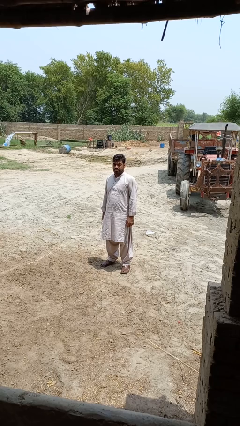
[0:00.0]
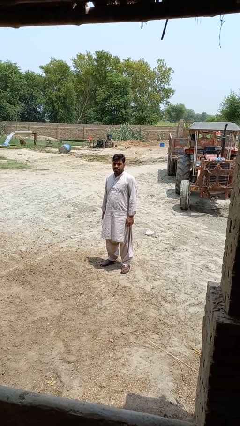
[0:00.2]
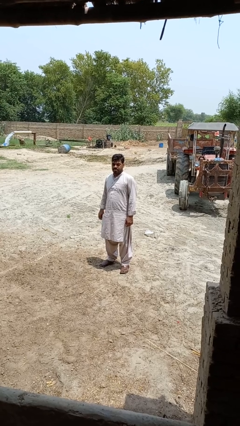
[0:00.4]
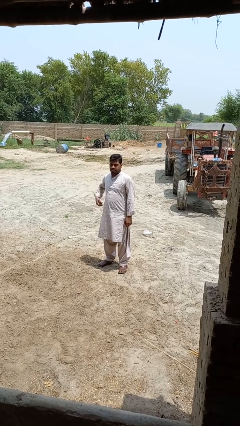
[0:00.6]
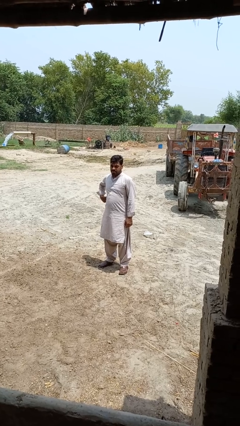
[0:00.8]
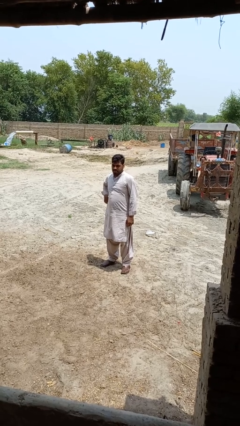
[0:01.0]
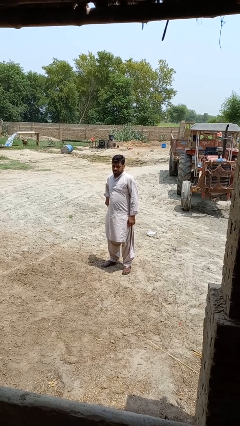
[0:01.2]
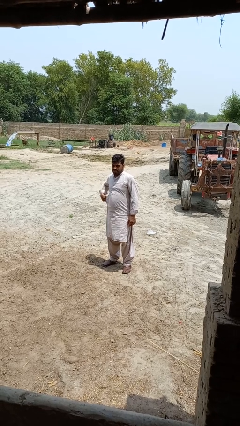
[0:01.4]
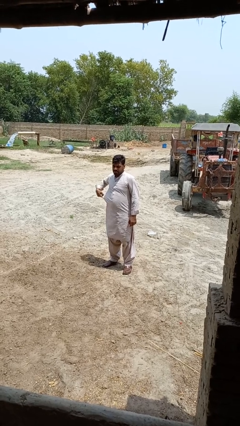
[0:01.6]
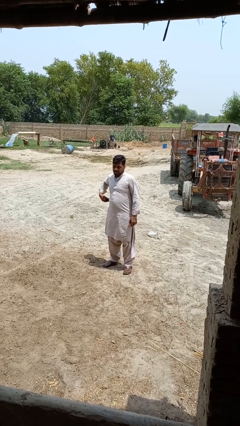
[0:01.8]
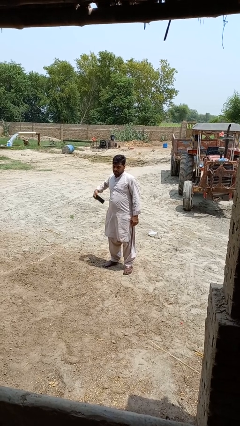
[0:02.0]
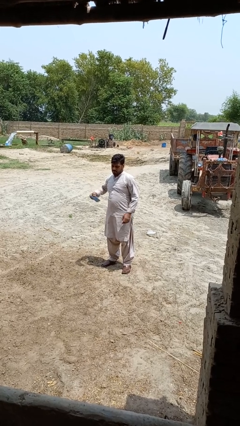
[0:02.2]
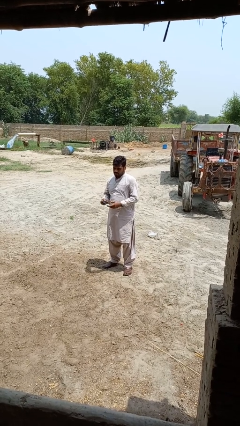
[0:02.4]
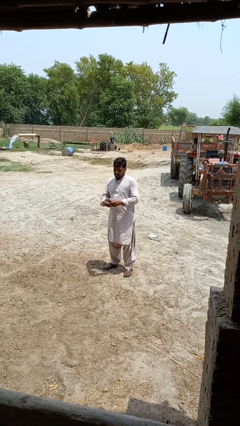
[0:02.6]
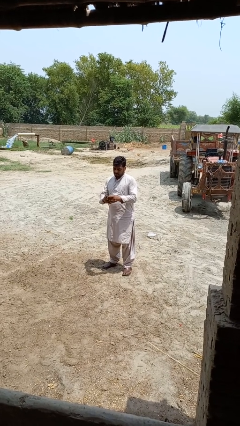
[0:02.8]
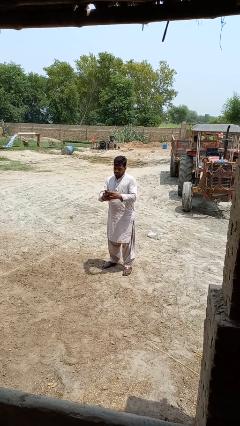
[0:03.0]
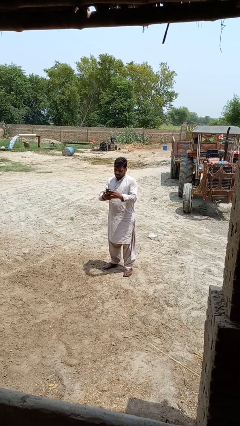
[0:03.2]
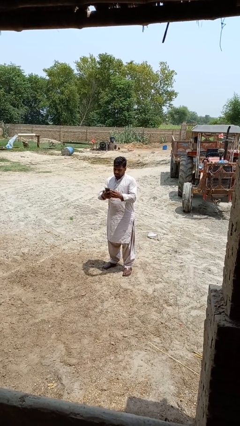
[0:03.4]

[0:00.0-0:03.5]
person takes phone from pocket

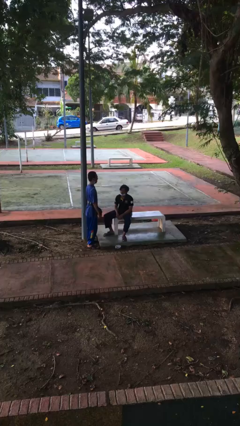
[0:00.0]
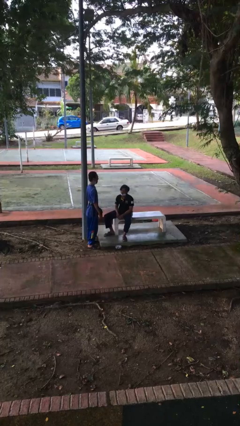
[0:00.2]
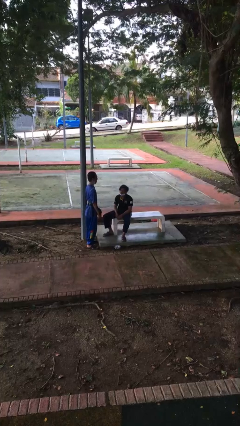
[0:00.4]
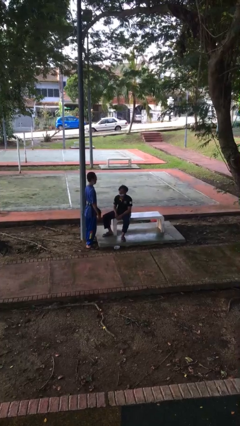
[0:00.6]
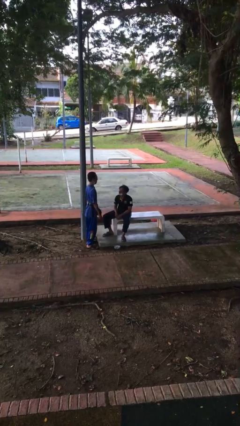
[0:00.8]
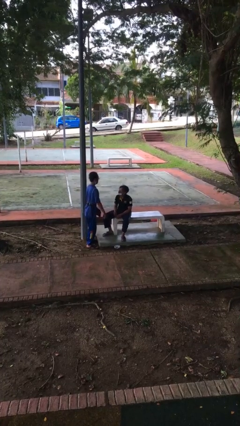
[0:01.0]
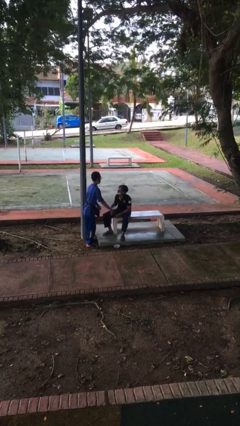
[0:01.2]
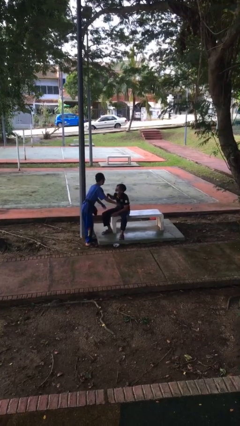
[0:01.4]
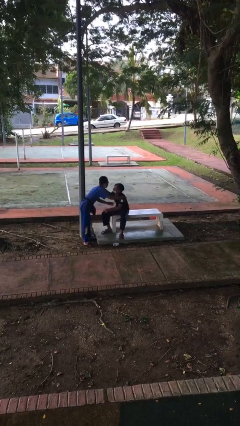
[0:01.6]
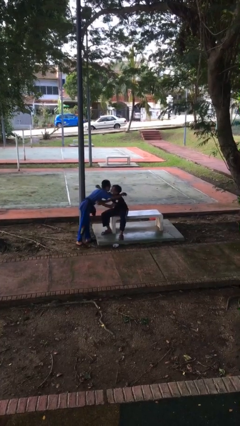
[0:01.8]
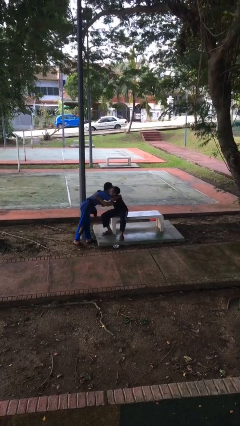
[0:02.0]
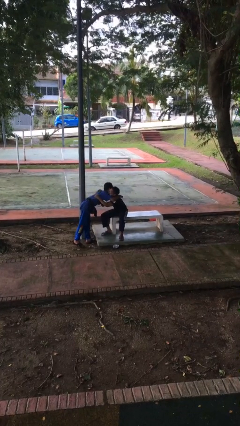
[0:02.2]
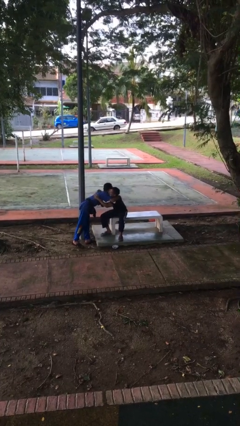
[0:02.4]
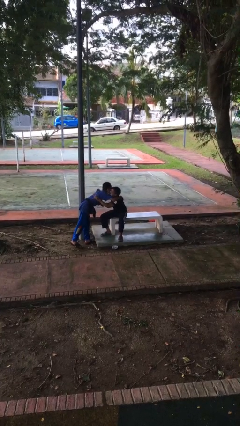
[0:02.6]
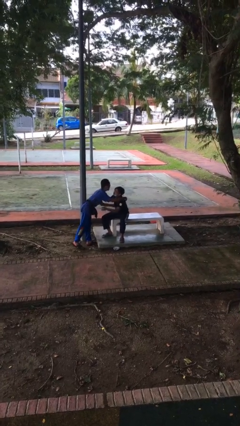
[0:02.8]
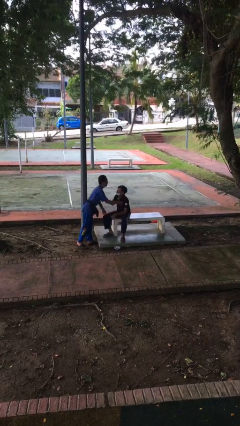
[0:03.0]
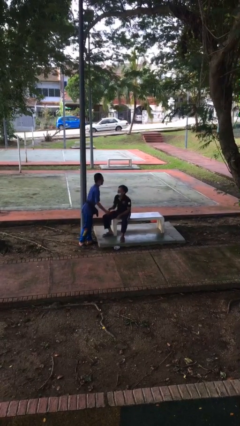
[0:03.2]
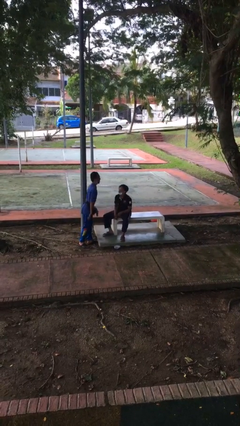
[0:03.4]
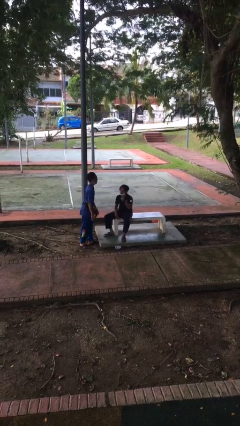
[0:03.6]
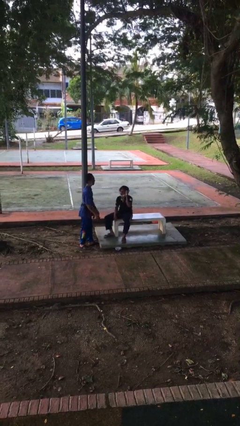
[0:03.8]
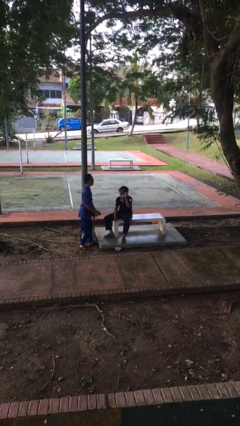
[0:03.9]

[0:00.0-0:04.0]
person embraces person

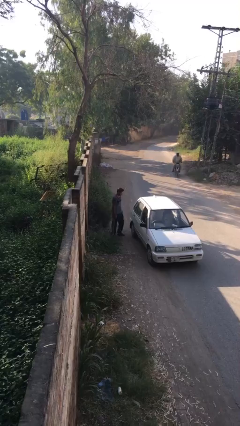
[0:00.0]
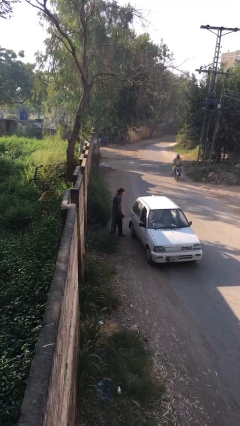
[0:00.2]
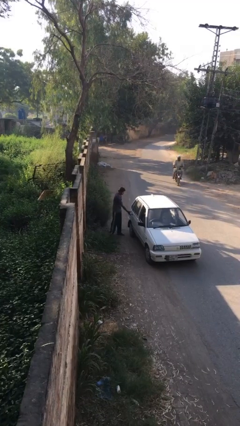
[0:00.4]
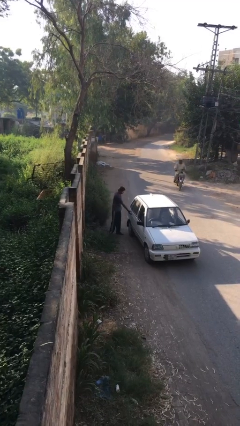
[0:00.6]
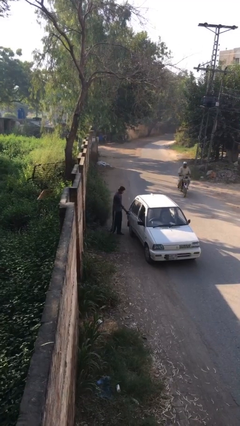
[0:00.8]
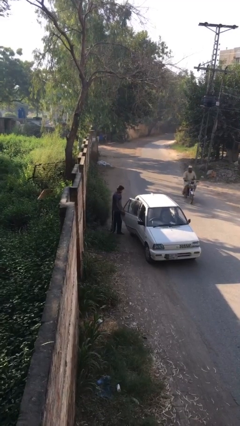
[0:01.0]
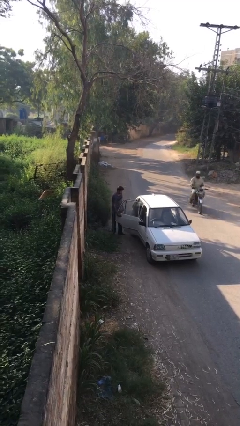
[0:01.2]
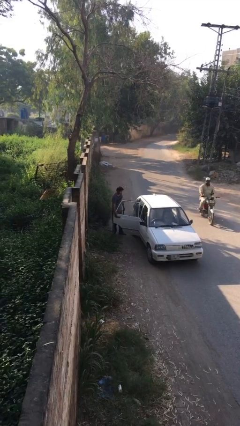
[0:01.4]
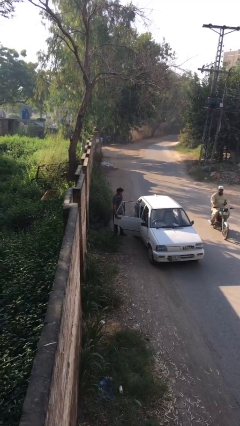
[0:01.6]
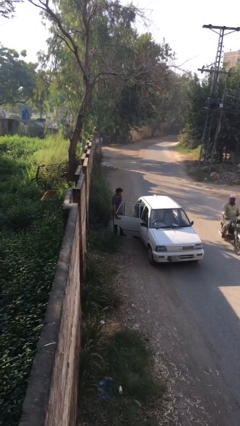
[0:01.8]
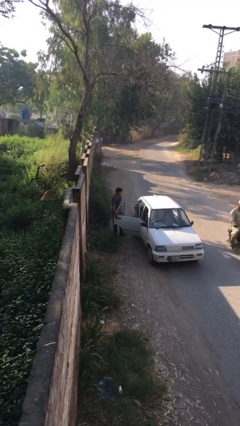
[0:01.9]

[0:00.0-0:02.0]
person opens car door

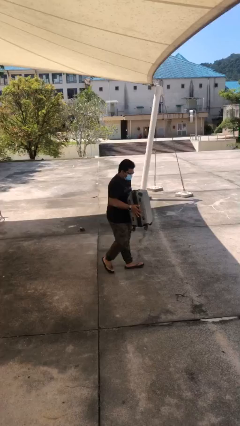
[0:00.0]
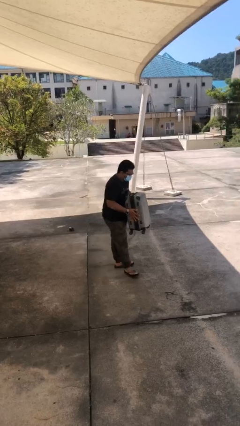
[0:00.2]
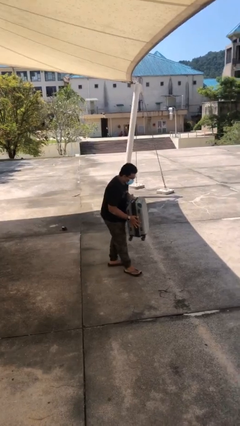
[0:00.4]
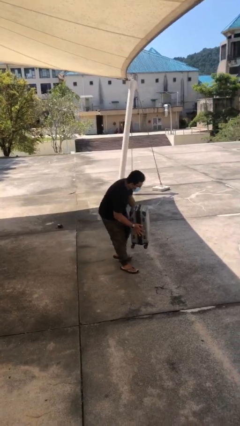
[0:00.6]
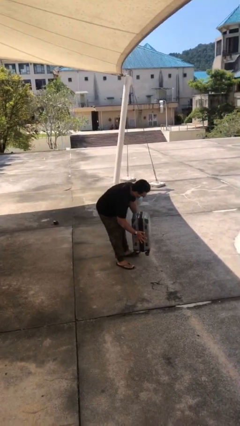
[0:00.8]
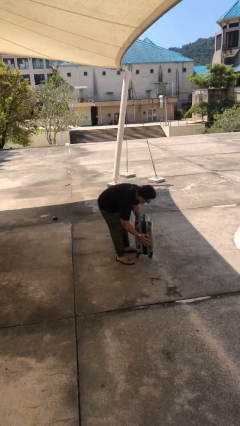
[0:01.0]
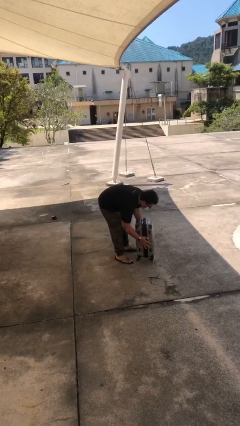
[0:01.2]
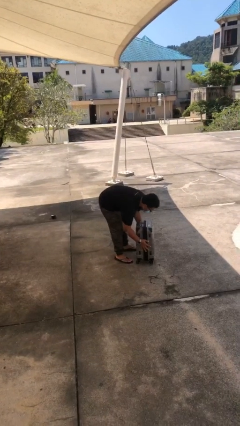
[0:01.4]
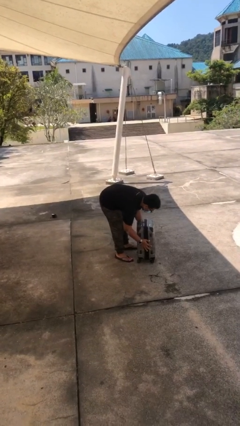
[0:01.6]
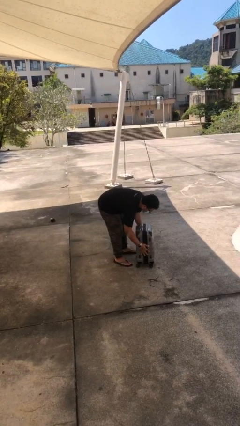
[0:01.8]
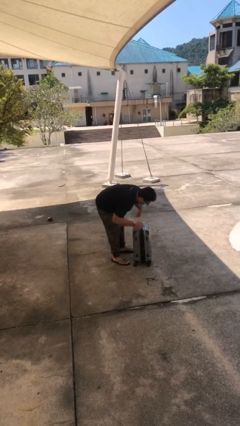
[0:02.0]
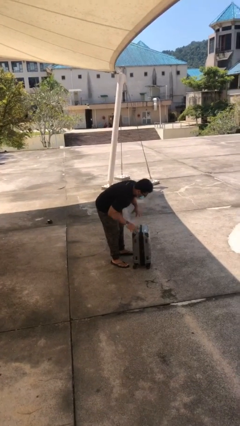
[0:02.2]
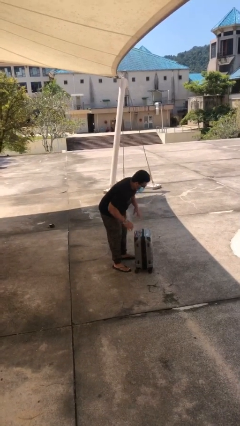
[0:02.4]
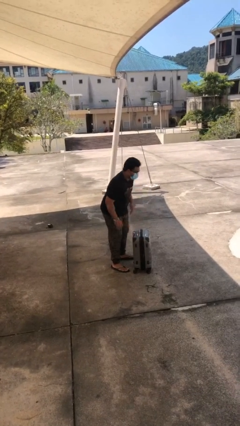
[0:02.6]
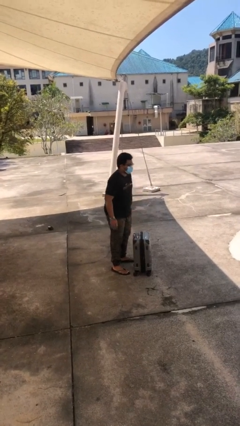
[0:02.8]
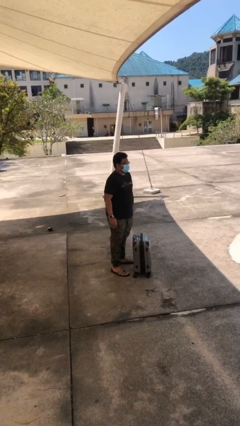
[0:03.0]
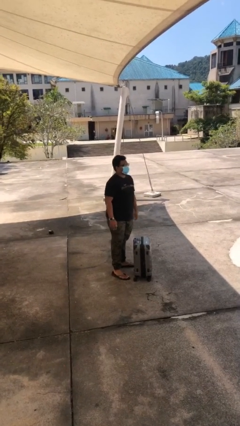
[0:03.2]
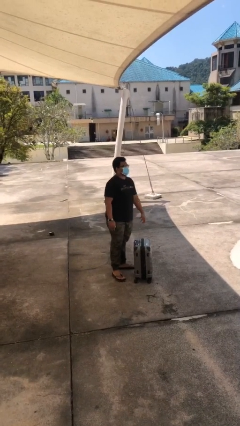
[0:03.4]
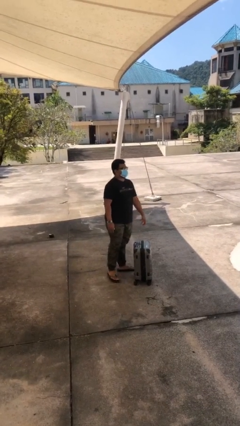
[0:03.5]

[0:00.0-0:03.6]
person puts down object on floor

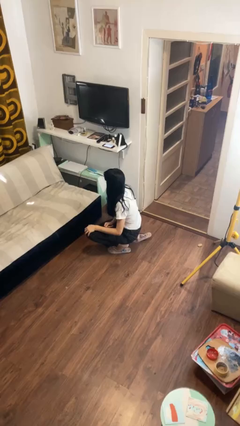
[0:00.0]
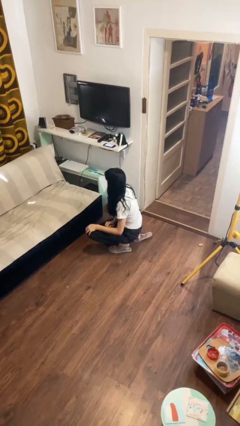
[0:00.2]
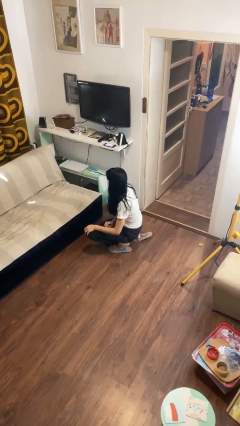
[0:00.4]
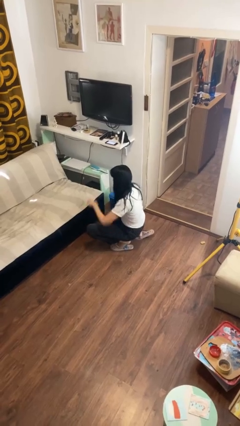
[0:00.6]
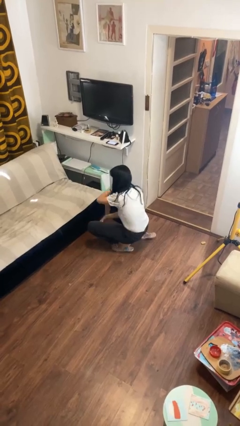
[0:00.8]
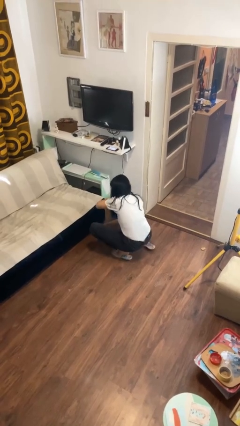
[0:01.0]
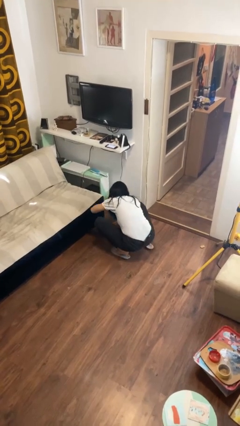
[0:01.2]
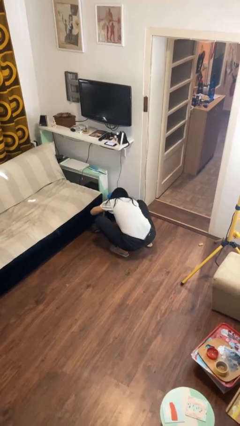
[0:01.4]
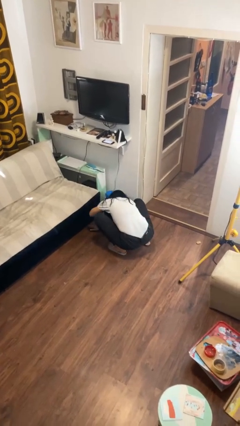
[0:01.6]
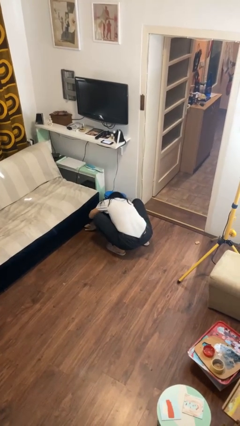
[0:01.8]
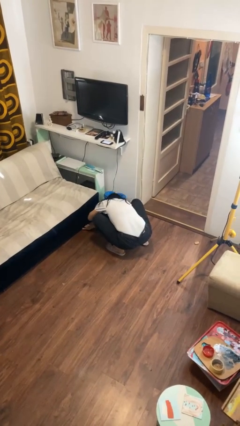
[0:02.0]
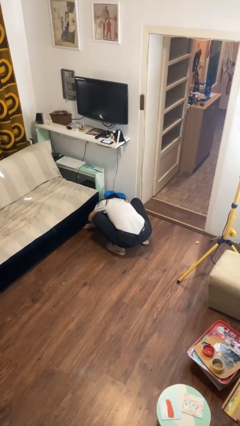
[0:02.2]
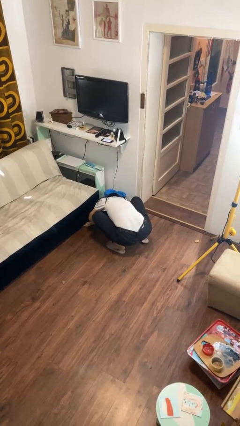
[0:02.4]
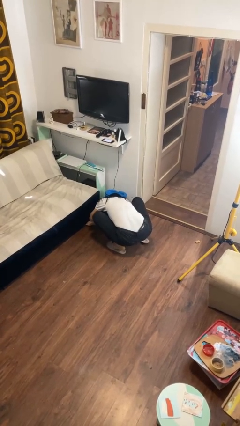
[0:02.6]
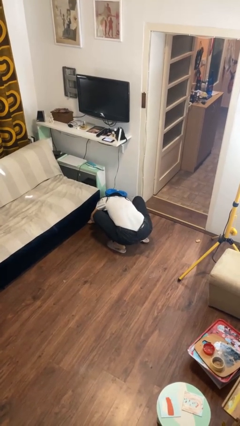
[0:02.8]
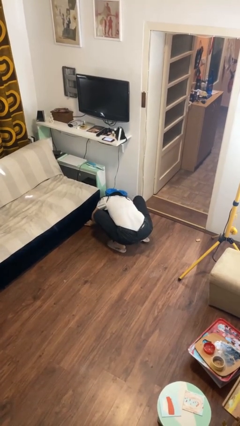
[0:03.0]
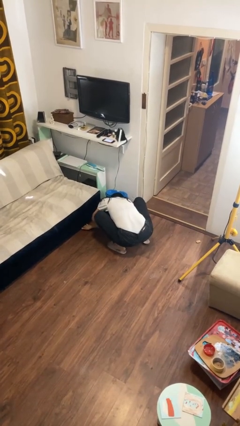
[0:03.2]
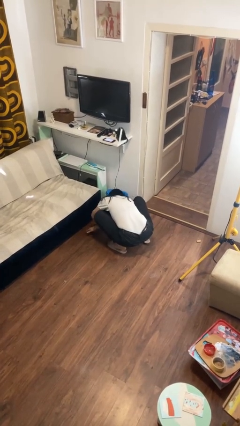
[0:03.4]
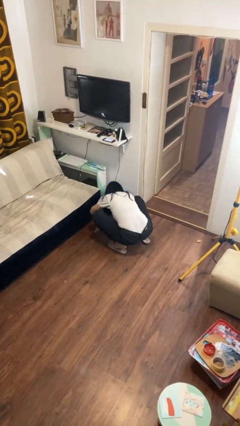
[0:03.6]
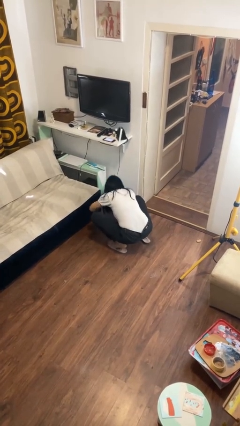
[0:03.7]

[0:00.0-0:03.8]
person searches under couch

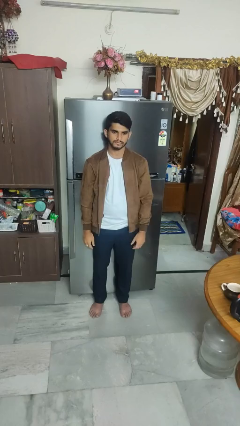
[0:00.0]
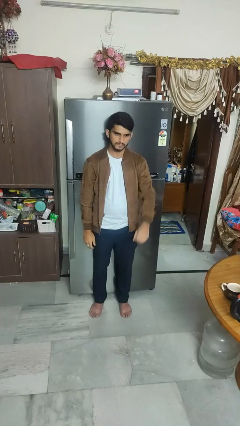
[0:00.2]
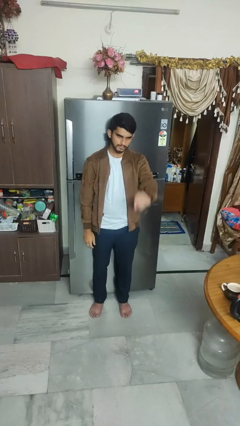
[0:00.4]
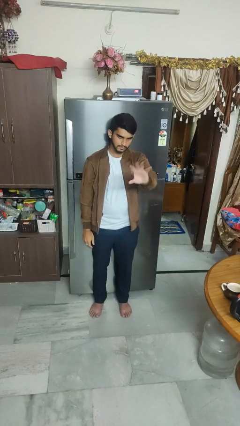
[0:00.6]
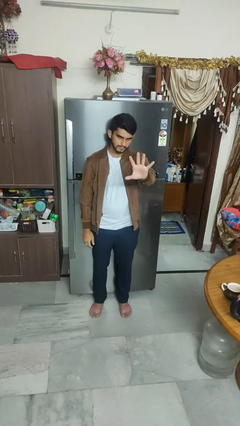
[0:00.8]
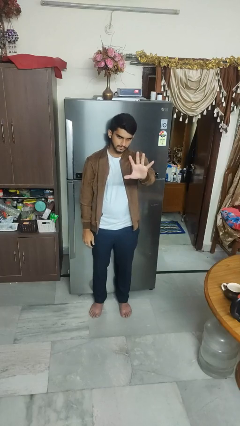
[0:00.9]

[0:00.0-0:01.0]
person gestures number five
